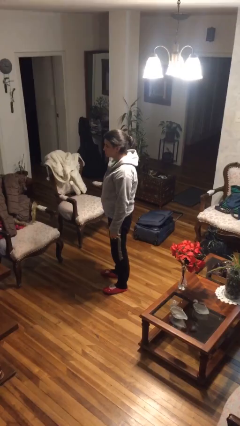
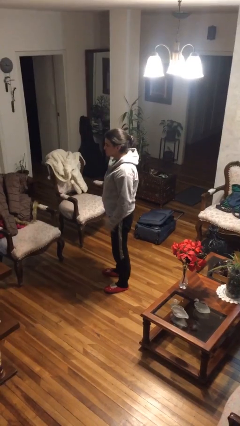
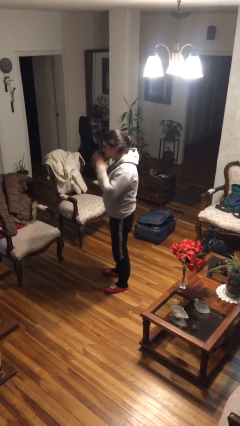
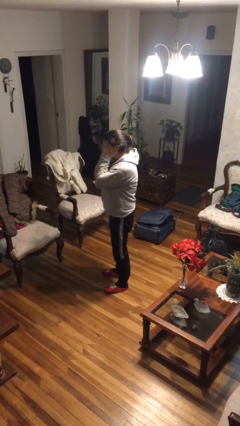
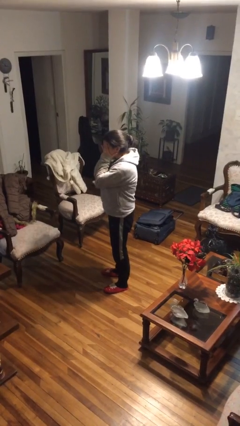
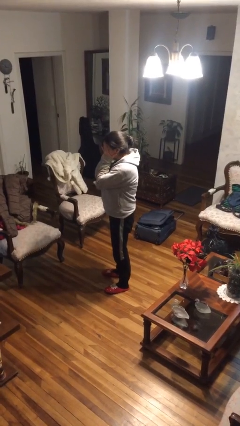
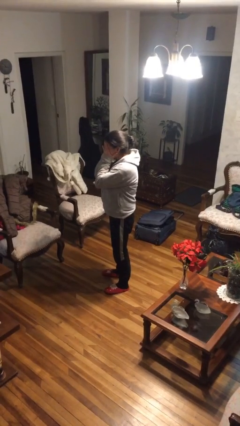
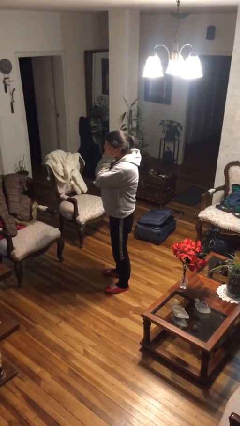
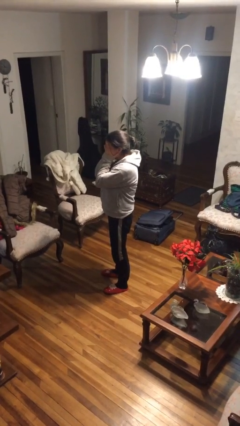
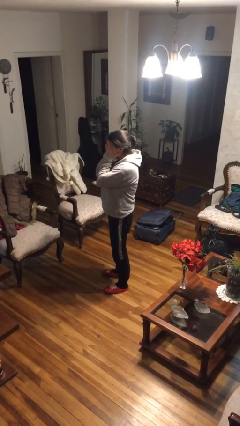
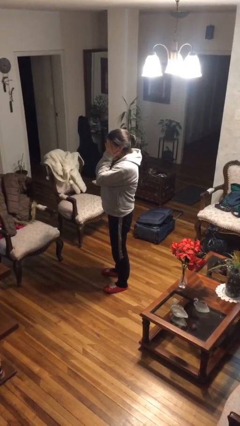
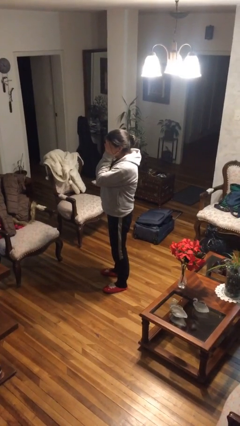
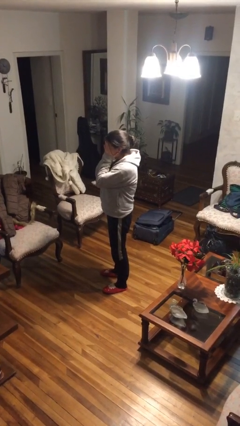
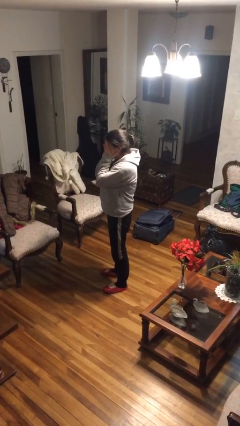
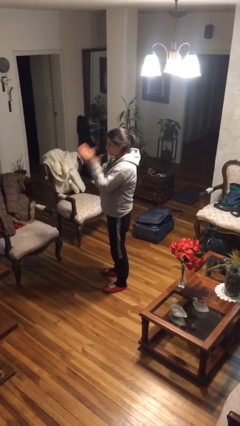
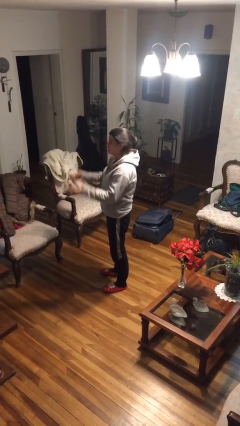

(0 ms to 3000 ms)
person covers face with hands

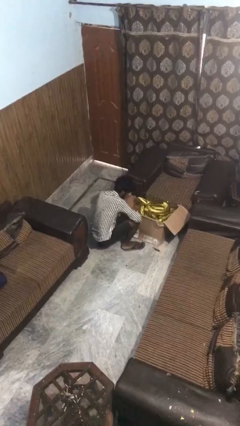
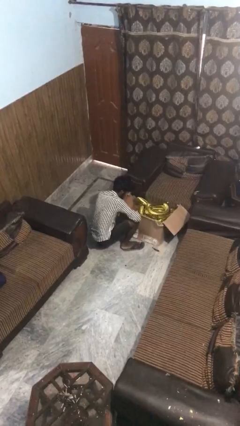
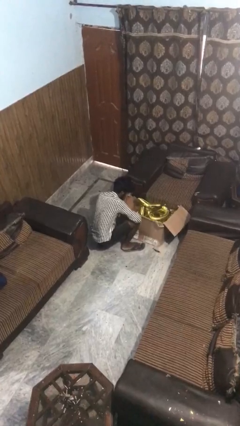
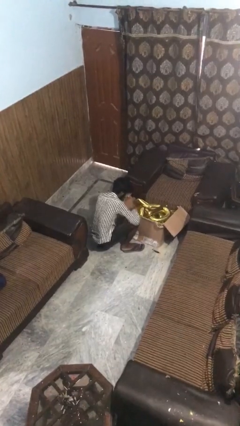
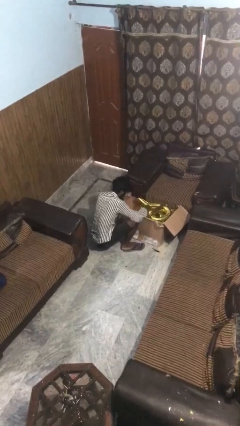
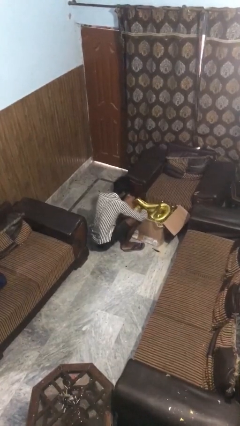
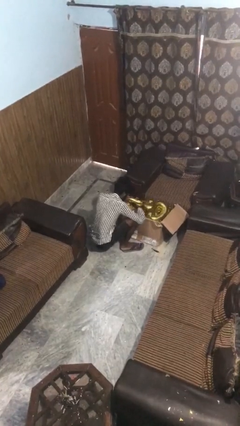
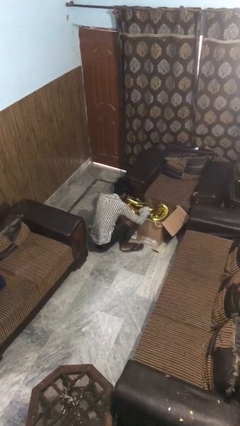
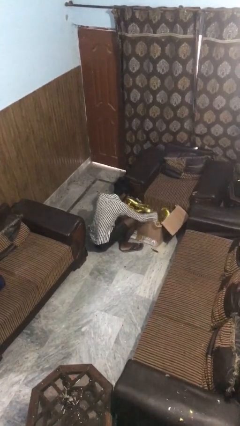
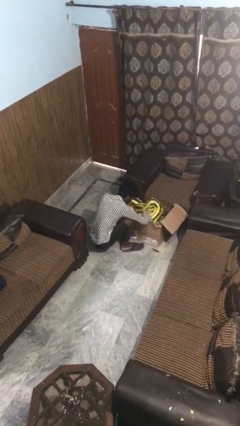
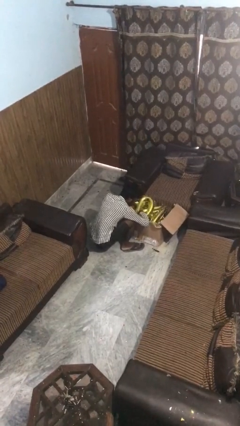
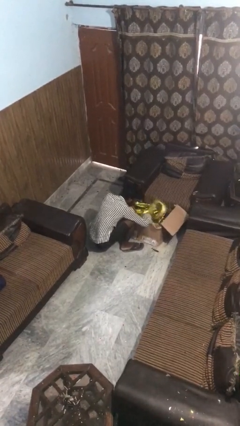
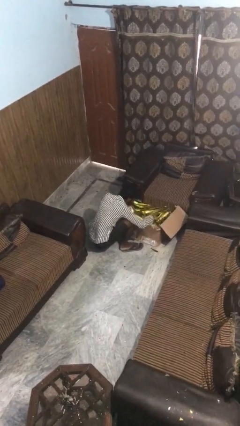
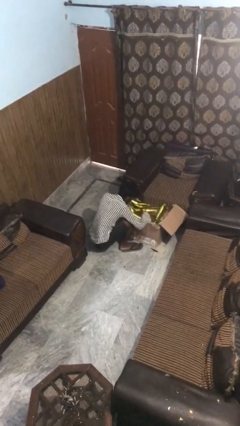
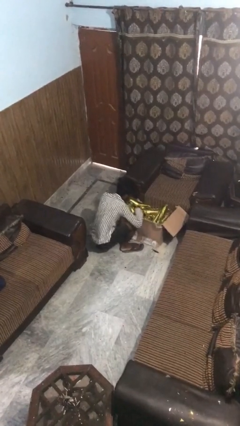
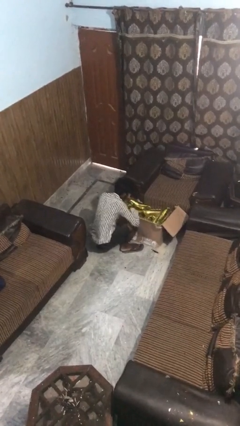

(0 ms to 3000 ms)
person searches in box

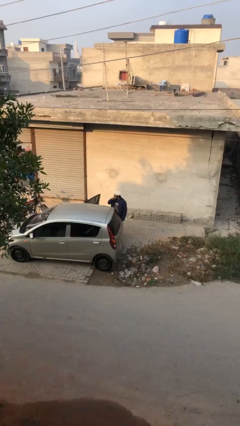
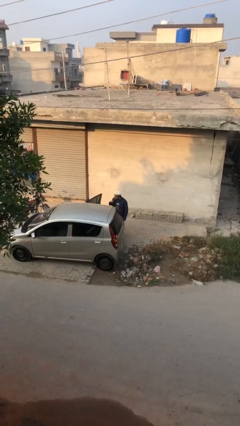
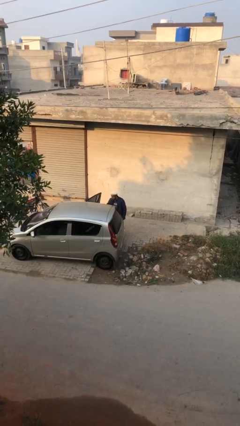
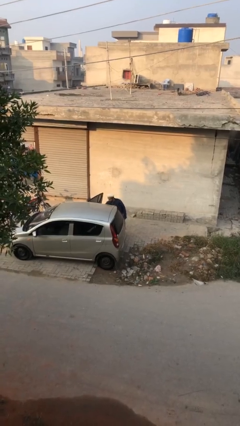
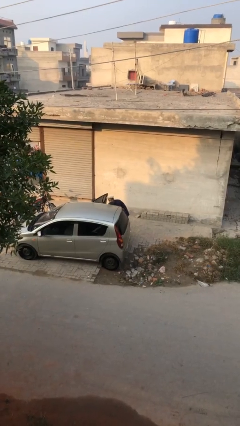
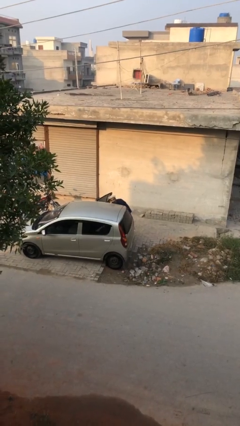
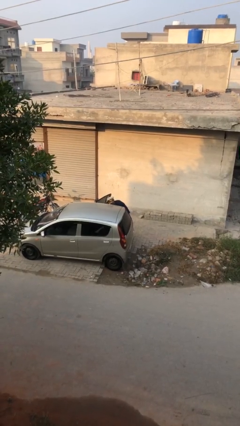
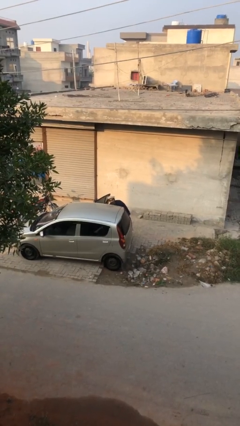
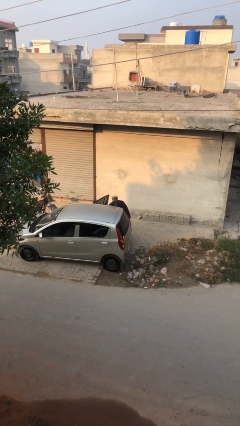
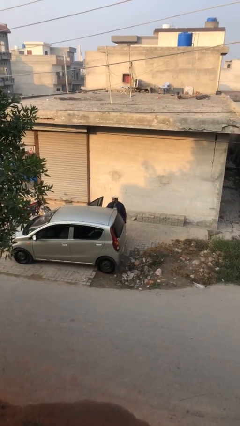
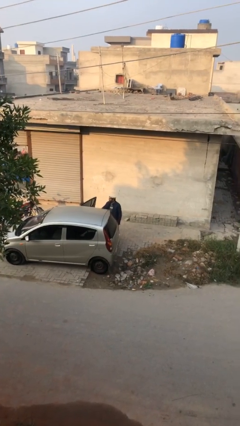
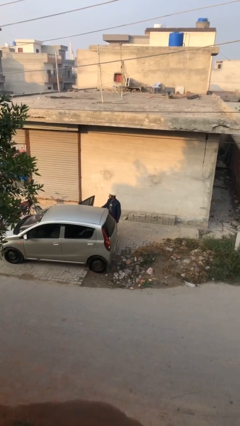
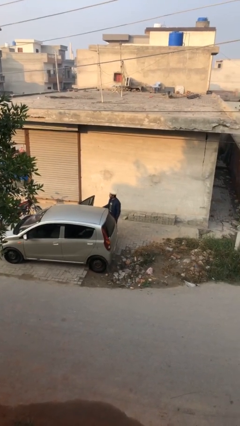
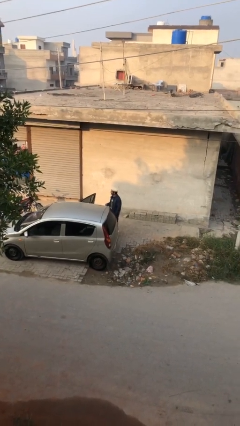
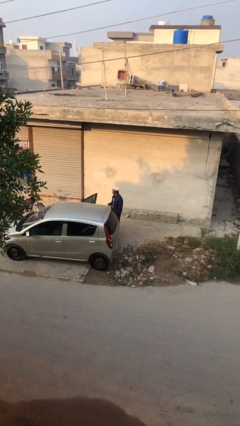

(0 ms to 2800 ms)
person unloads car

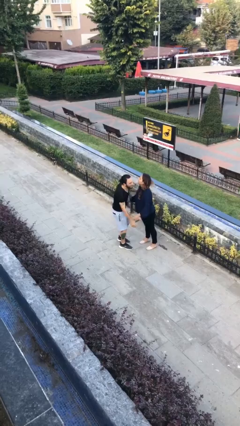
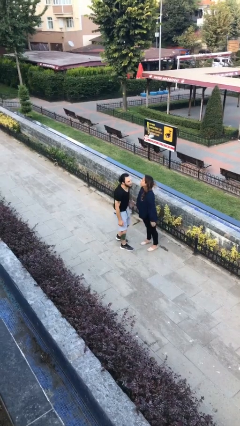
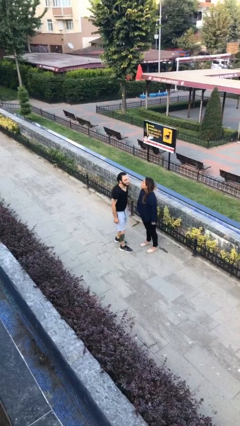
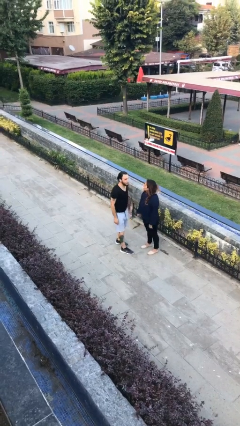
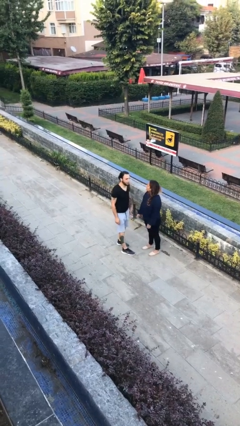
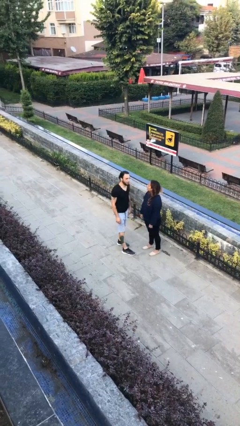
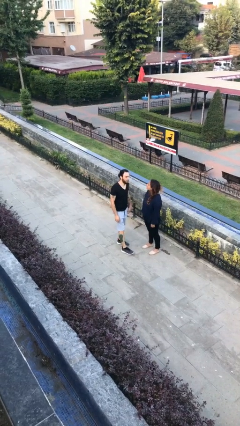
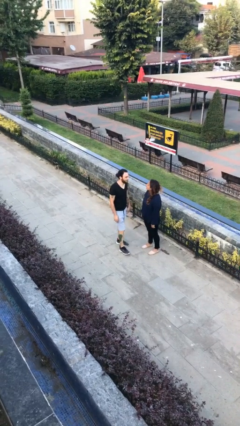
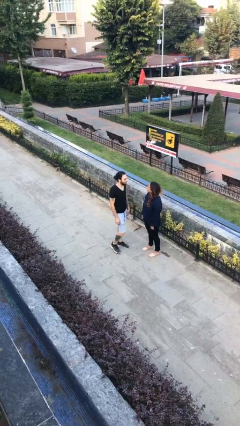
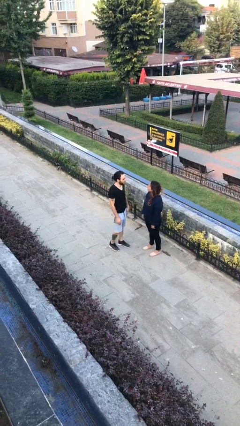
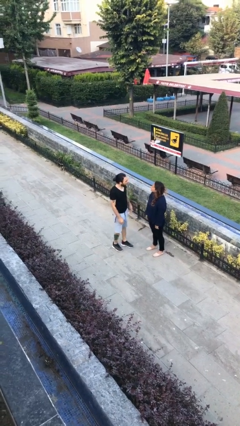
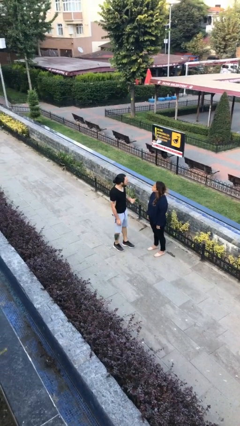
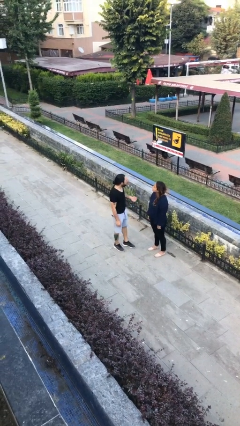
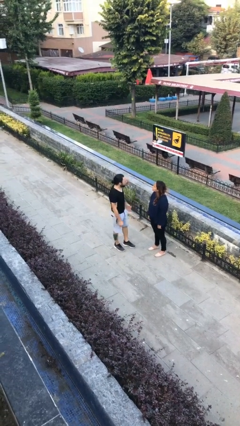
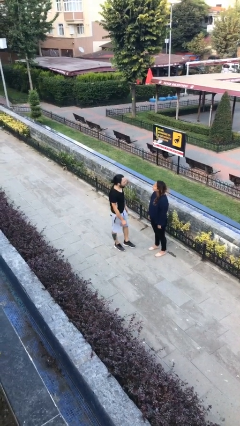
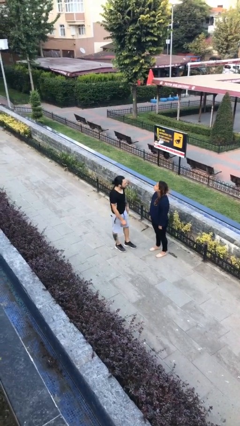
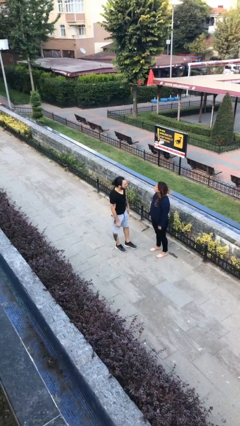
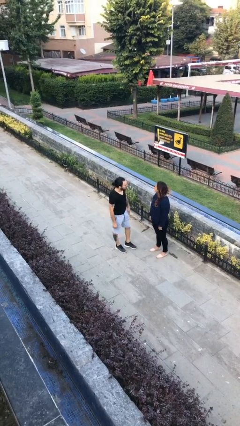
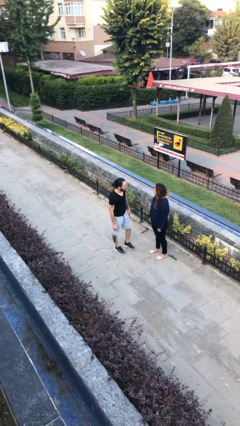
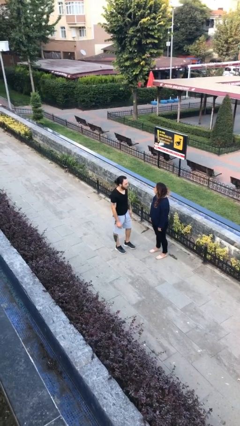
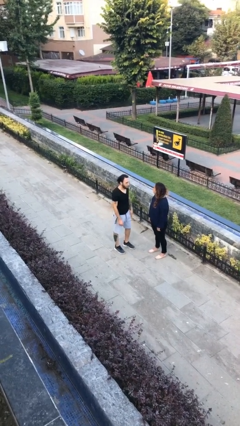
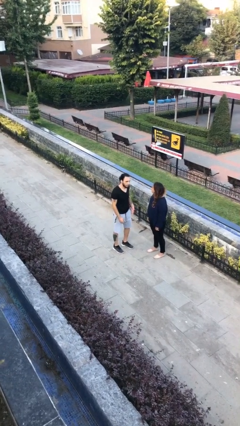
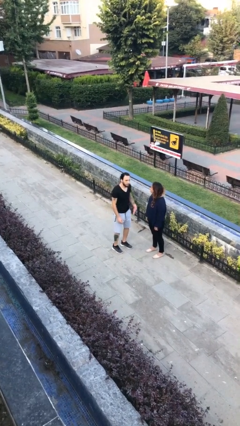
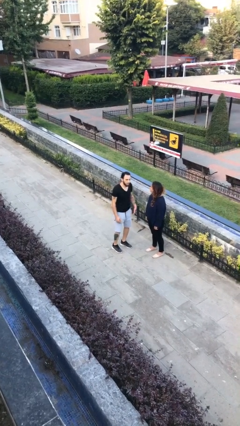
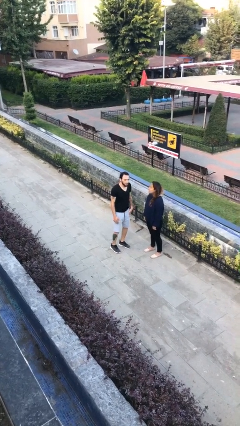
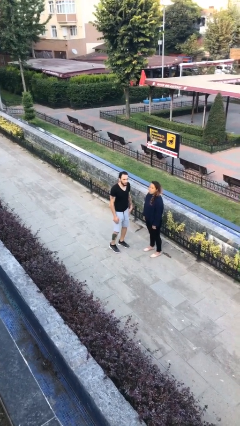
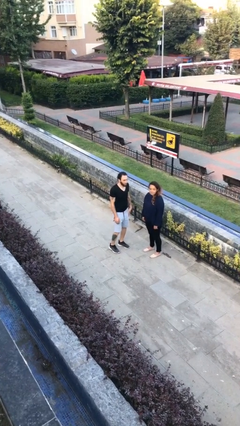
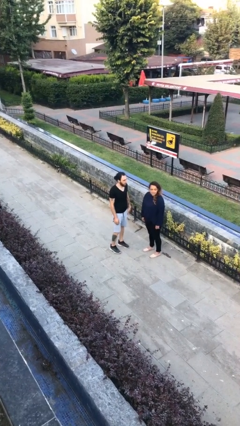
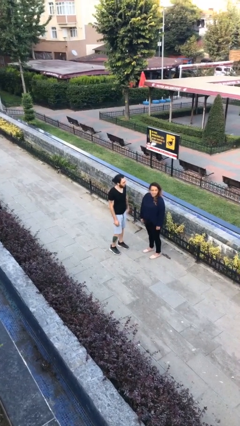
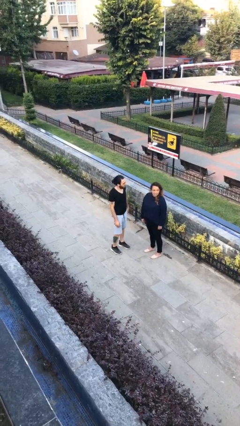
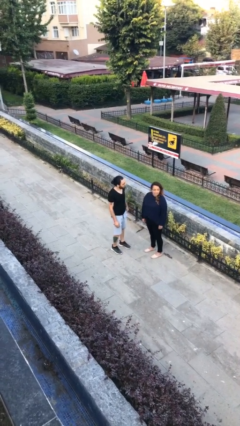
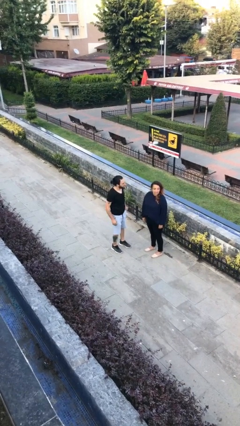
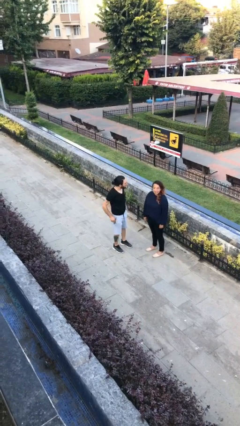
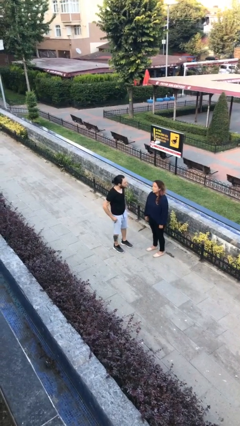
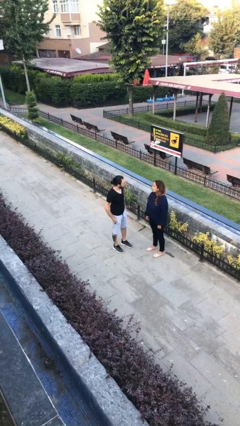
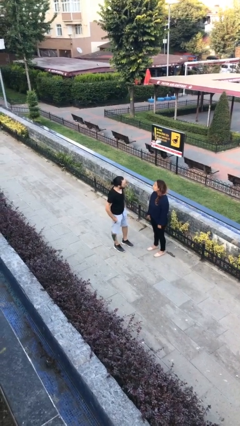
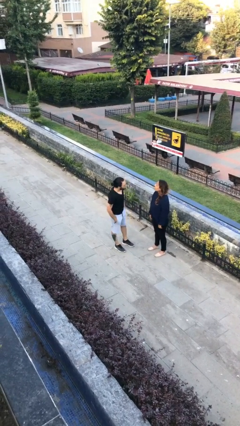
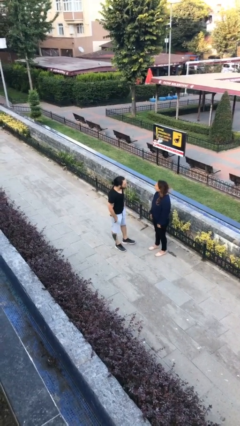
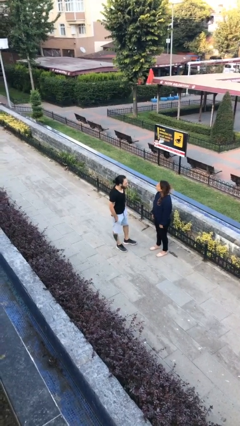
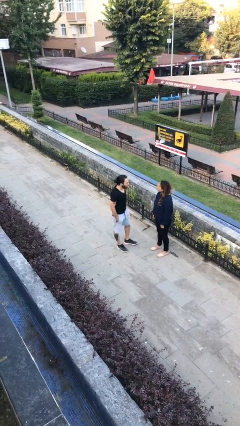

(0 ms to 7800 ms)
person talks to person

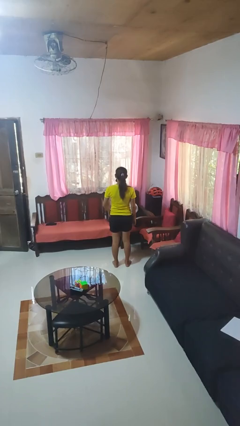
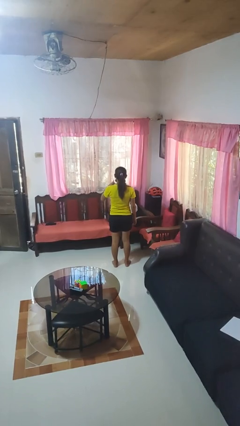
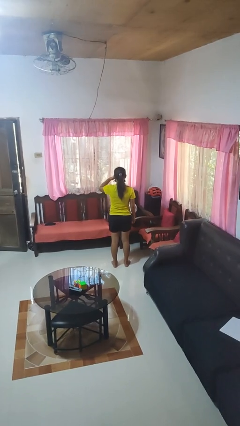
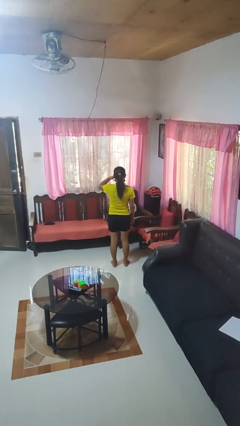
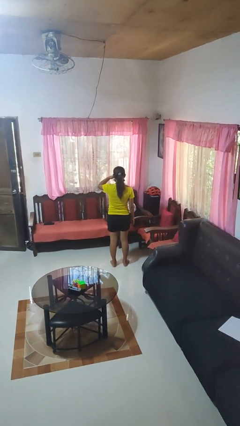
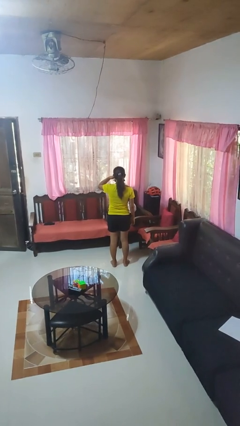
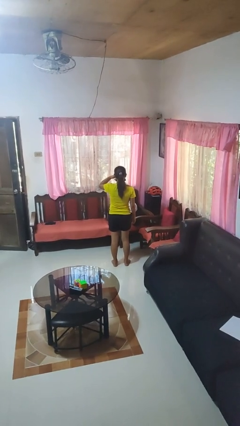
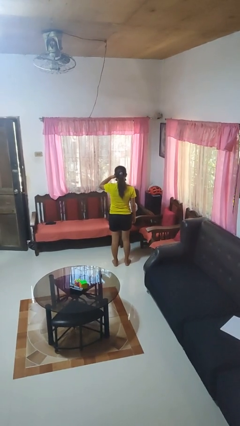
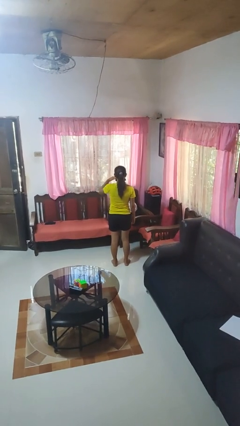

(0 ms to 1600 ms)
person gestures call me
